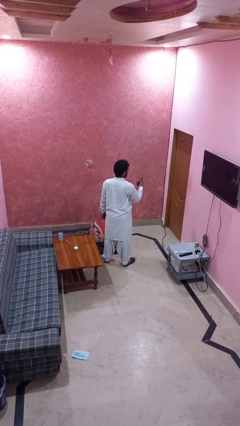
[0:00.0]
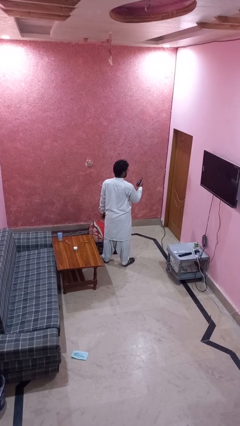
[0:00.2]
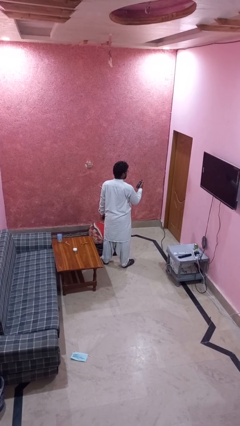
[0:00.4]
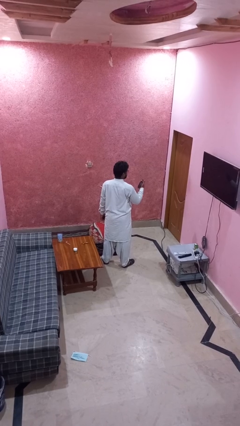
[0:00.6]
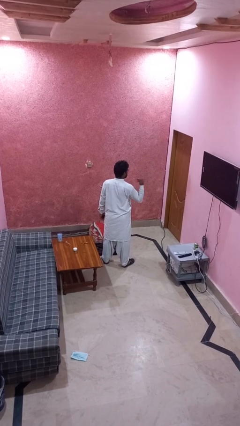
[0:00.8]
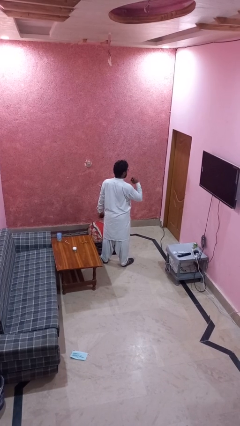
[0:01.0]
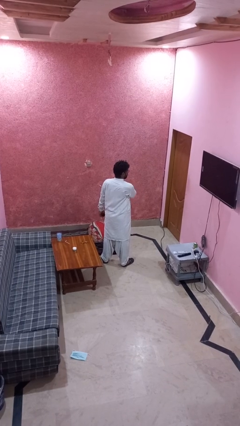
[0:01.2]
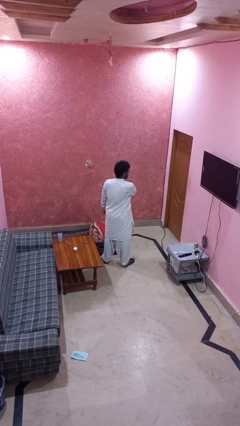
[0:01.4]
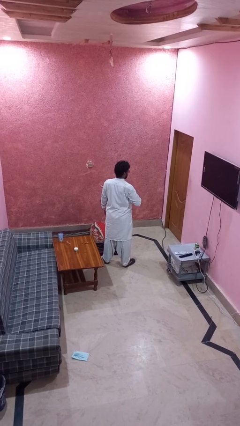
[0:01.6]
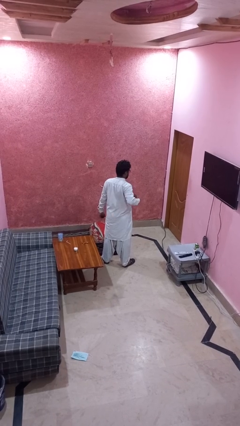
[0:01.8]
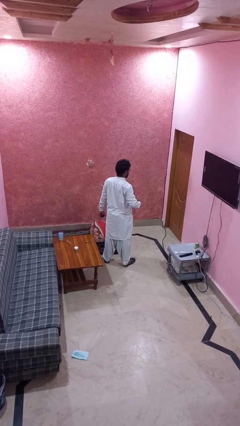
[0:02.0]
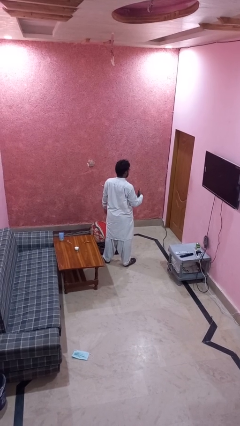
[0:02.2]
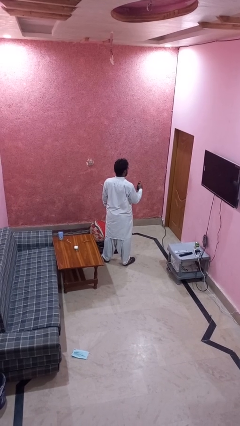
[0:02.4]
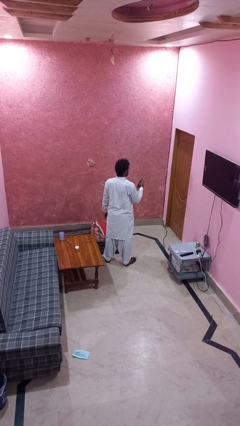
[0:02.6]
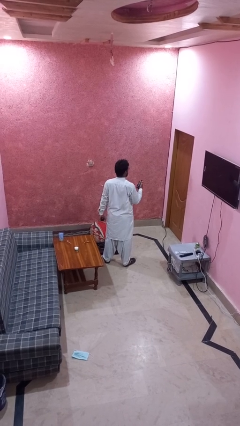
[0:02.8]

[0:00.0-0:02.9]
person applies deodorant

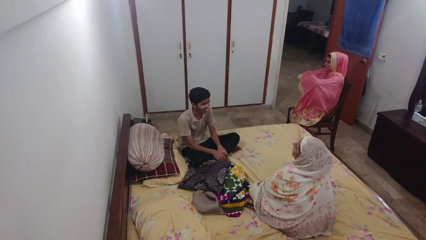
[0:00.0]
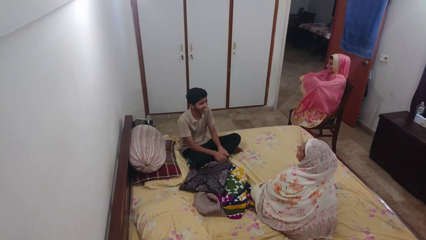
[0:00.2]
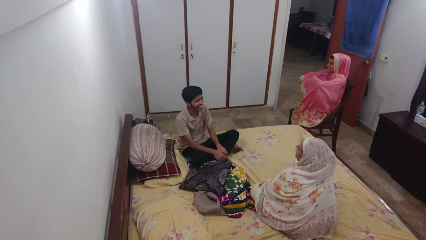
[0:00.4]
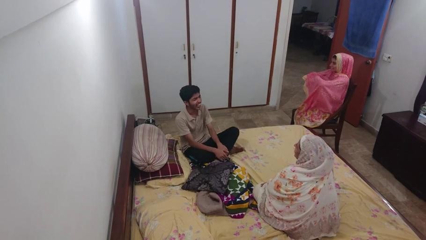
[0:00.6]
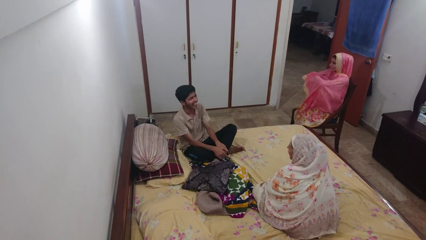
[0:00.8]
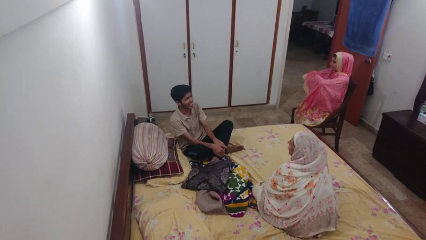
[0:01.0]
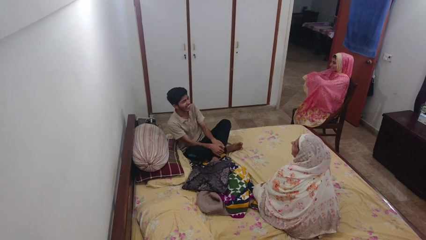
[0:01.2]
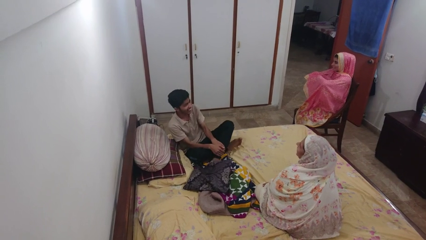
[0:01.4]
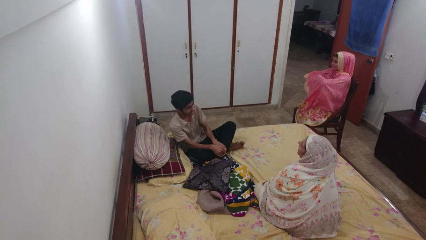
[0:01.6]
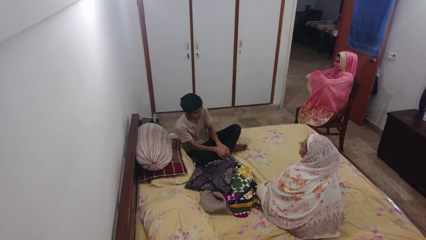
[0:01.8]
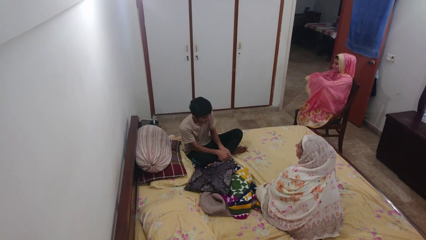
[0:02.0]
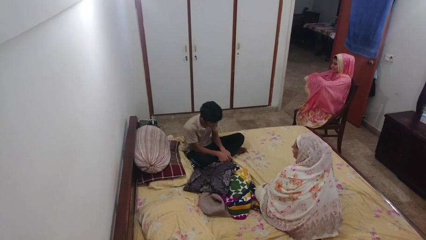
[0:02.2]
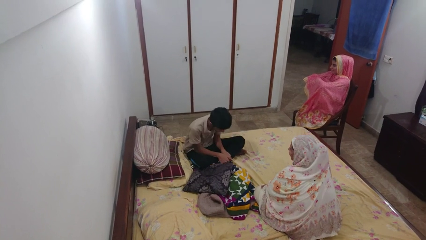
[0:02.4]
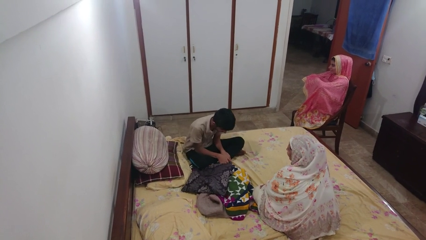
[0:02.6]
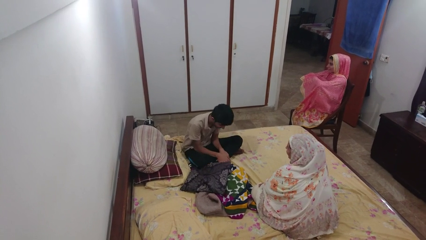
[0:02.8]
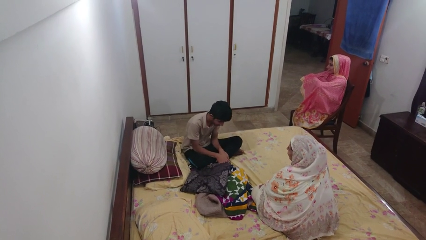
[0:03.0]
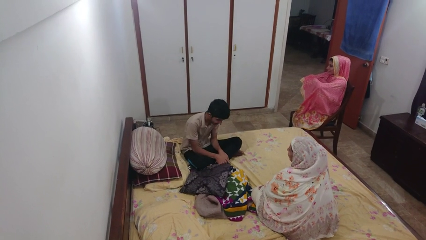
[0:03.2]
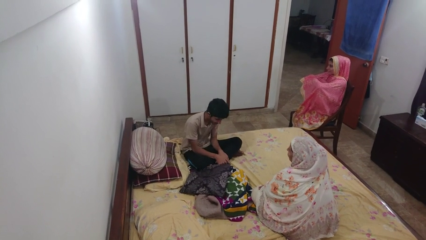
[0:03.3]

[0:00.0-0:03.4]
person laughs with person

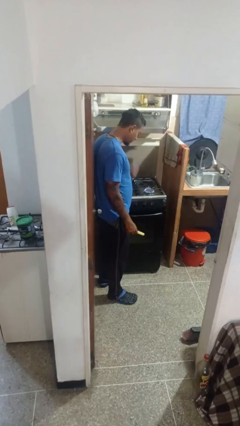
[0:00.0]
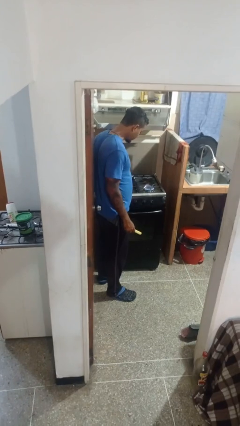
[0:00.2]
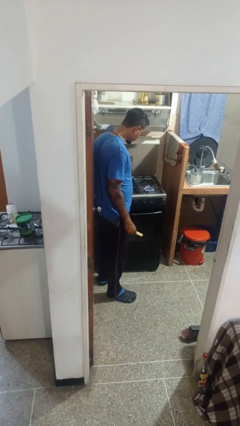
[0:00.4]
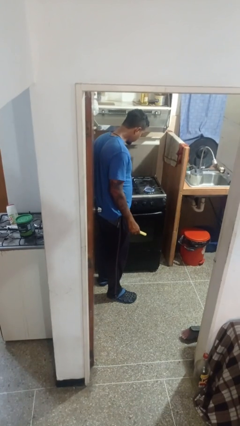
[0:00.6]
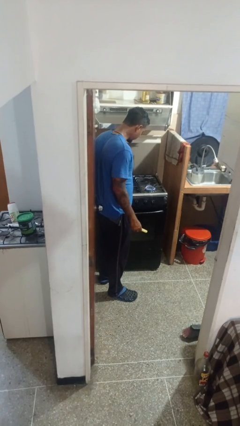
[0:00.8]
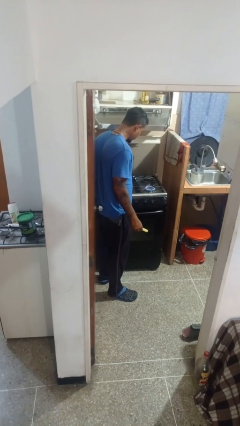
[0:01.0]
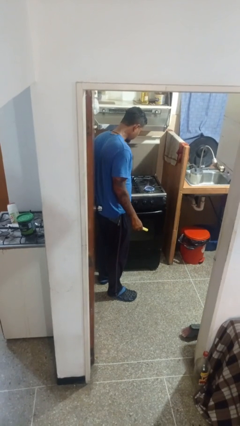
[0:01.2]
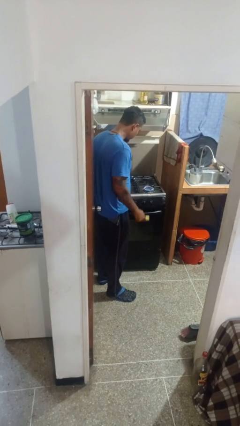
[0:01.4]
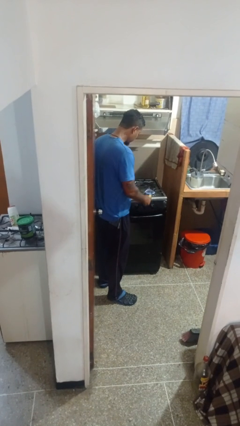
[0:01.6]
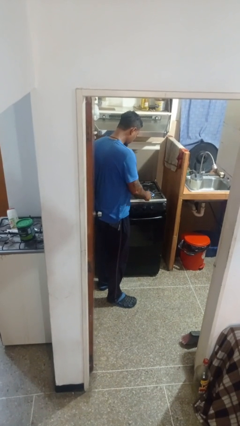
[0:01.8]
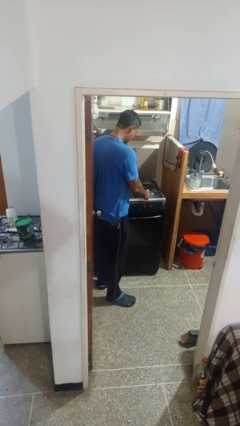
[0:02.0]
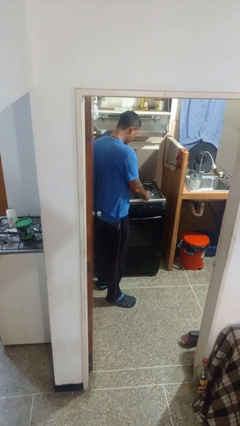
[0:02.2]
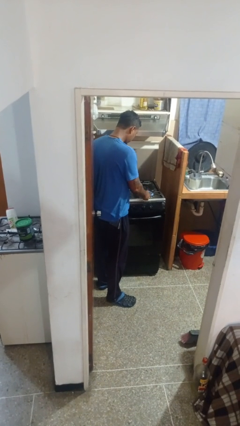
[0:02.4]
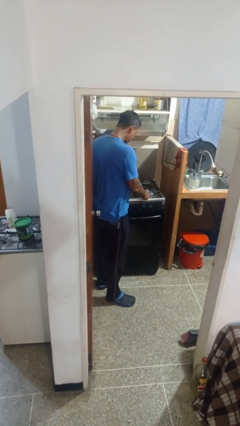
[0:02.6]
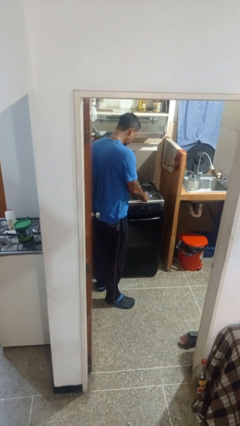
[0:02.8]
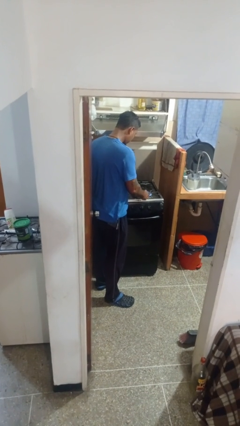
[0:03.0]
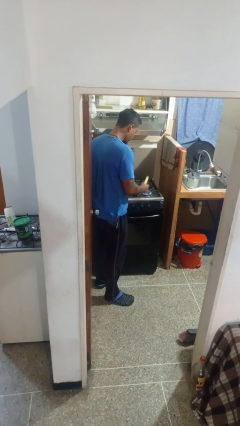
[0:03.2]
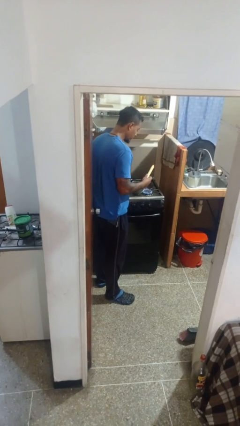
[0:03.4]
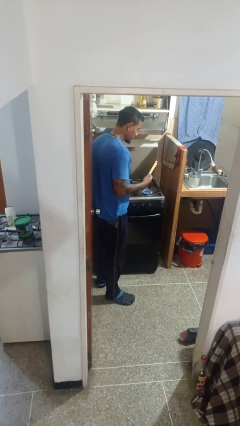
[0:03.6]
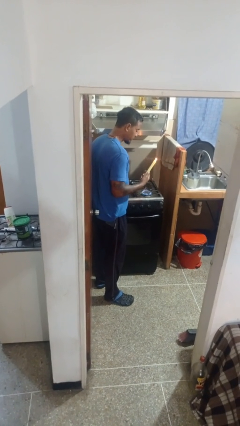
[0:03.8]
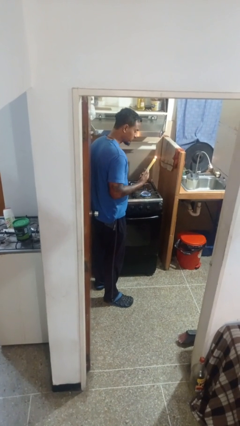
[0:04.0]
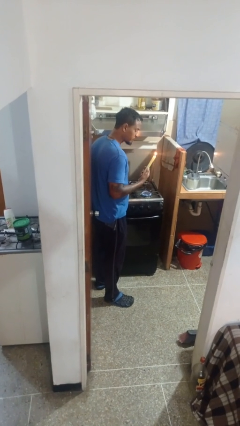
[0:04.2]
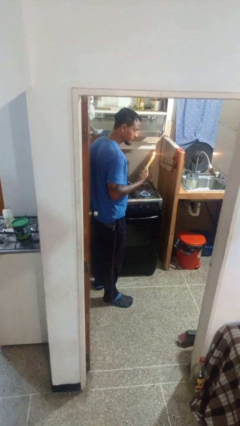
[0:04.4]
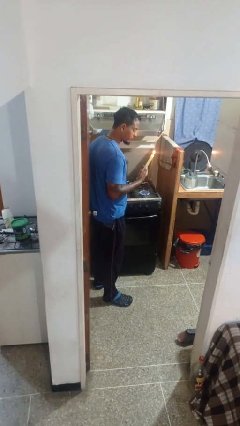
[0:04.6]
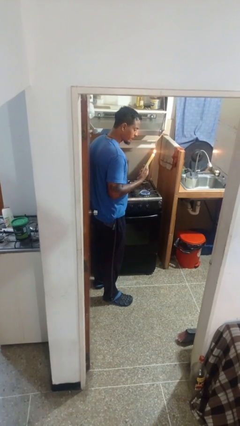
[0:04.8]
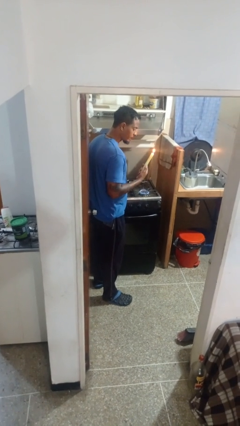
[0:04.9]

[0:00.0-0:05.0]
person lights candle

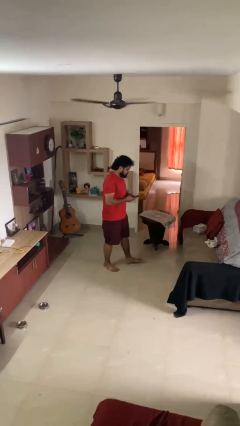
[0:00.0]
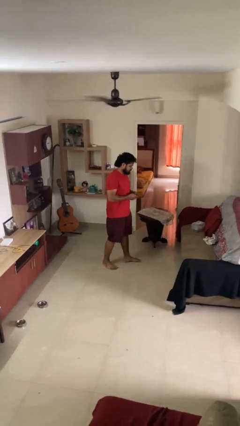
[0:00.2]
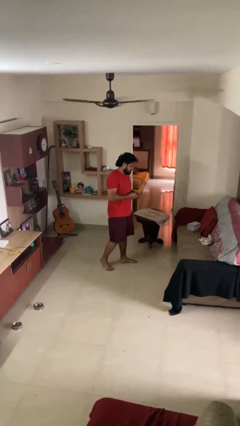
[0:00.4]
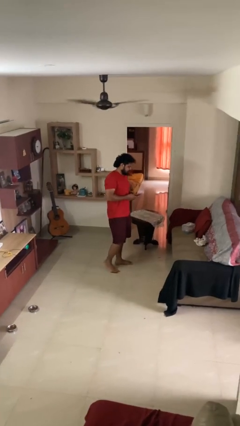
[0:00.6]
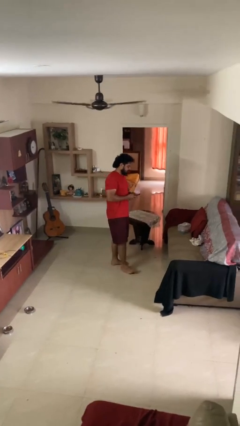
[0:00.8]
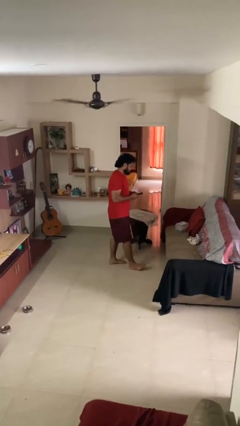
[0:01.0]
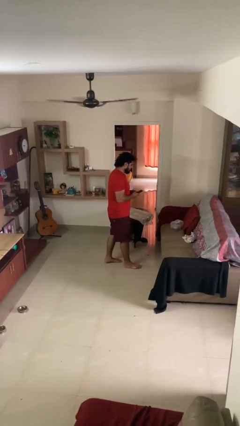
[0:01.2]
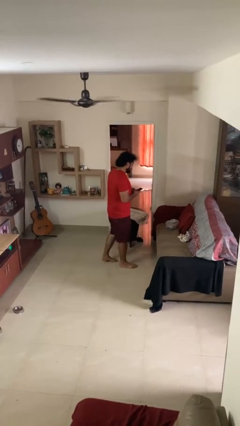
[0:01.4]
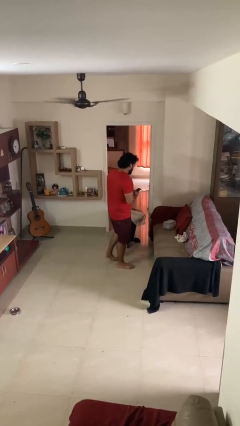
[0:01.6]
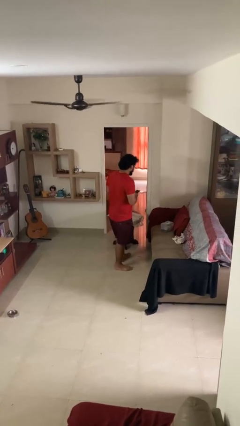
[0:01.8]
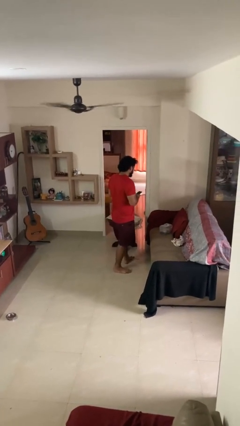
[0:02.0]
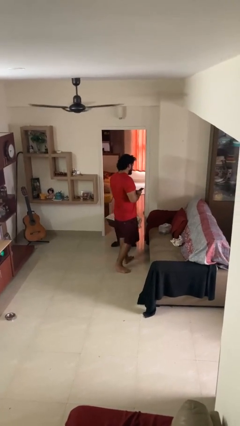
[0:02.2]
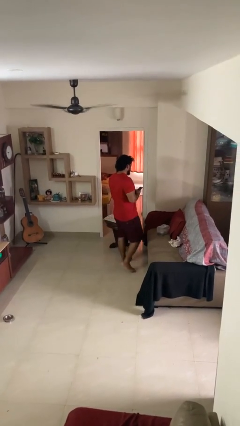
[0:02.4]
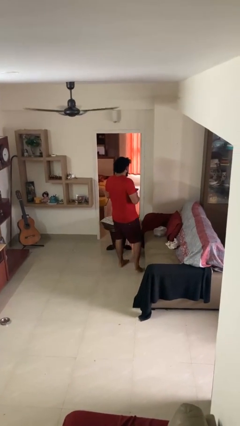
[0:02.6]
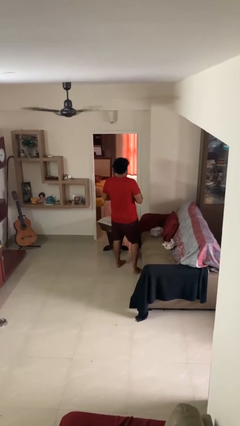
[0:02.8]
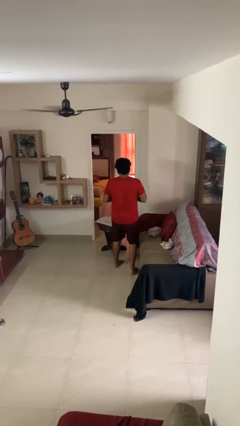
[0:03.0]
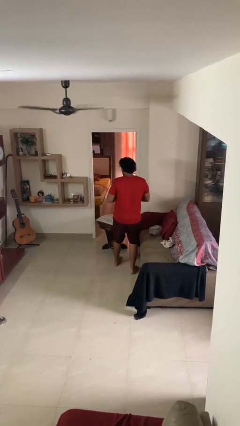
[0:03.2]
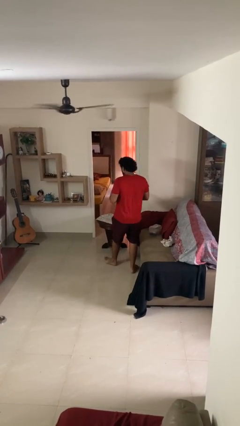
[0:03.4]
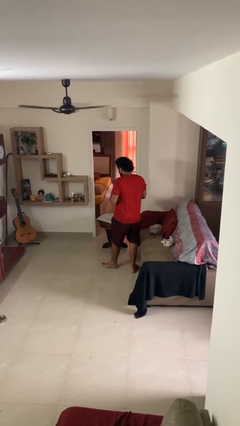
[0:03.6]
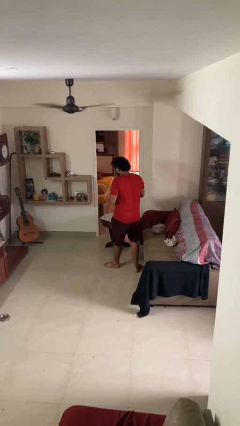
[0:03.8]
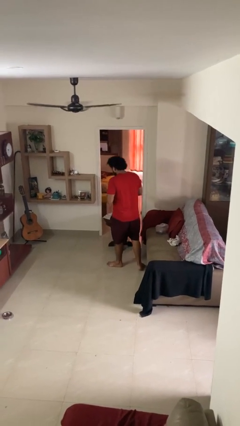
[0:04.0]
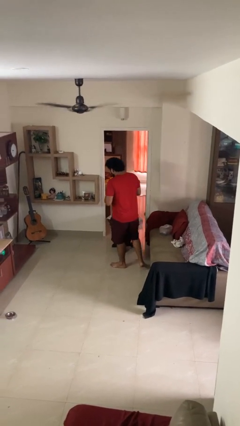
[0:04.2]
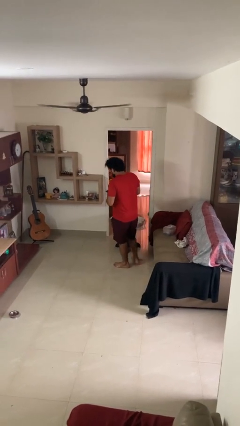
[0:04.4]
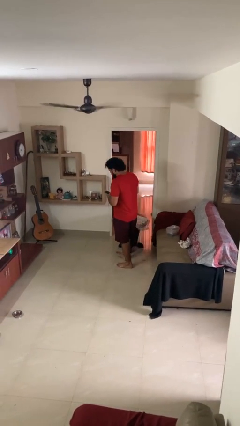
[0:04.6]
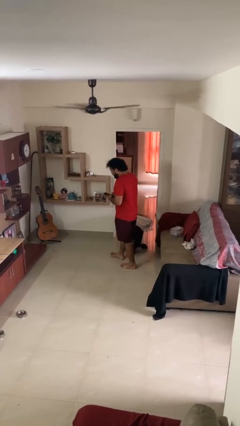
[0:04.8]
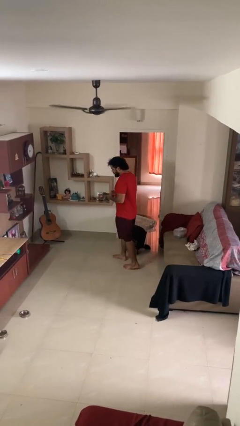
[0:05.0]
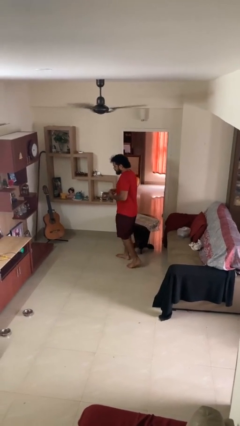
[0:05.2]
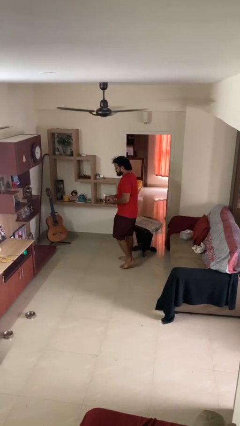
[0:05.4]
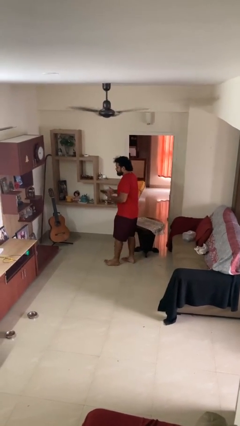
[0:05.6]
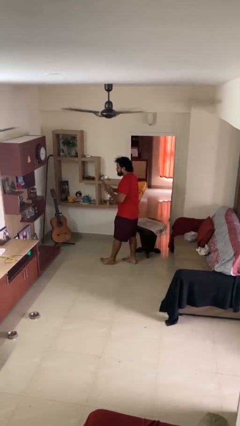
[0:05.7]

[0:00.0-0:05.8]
person texts on phone
